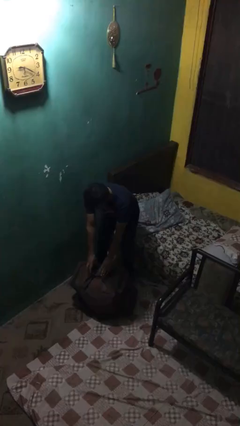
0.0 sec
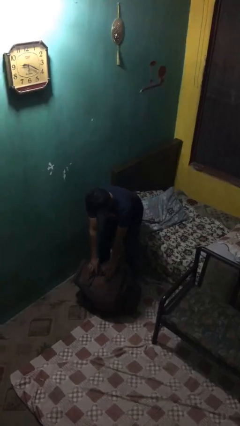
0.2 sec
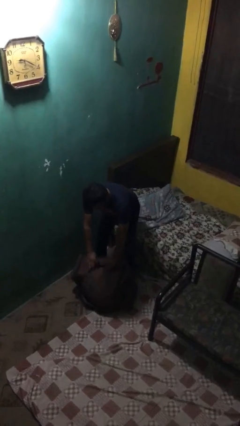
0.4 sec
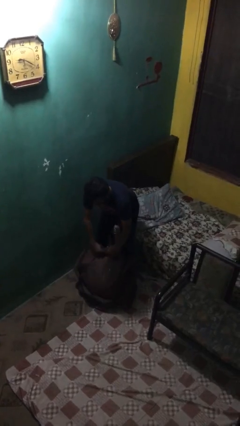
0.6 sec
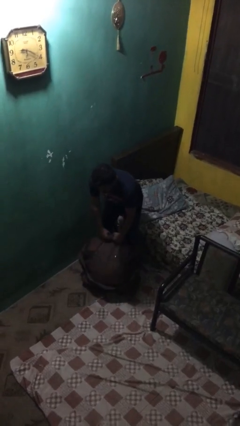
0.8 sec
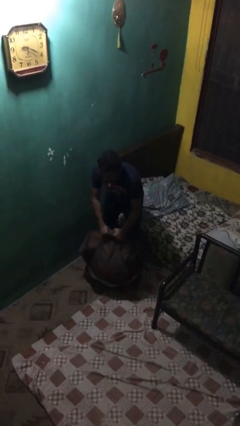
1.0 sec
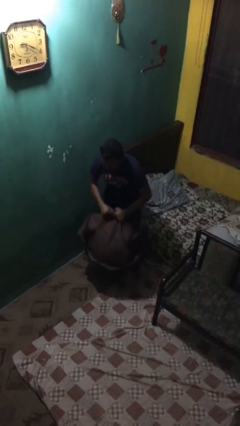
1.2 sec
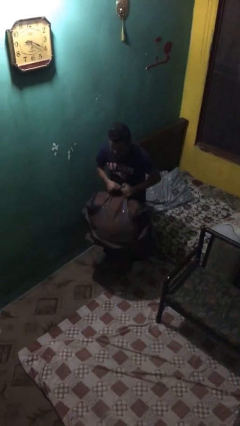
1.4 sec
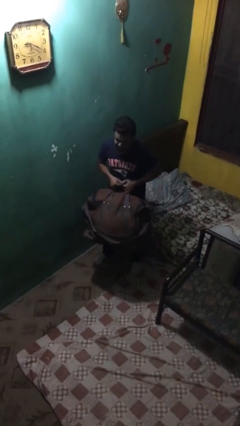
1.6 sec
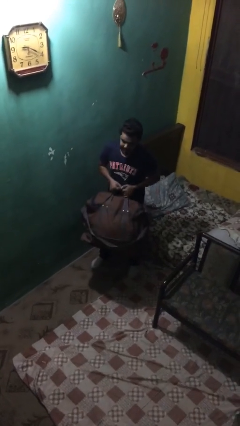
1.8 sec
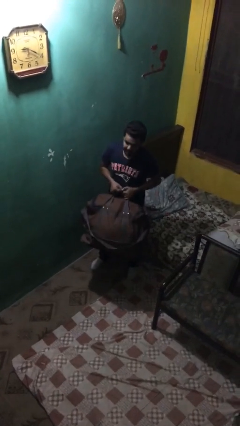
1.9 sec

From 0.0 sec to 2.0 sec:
person picks up object from floor

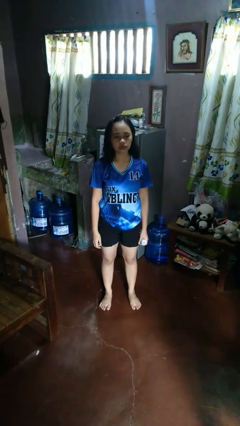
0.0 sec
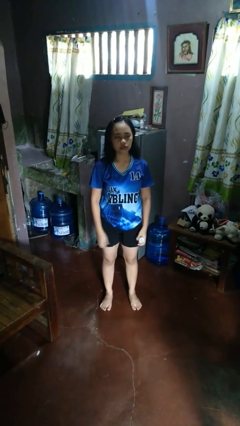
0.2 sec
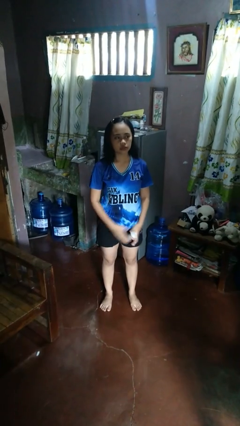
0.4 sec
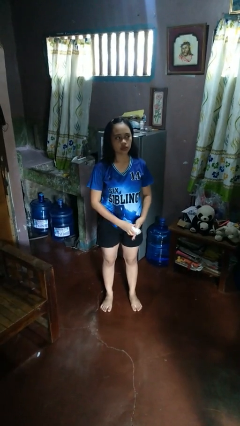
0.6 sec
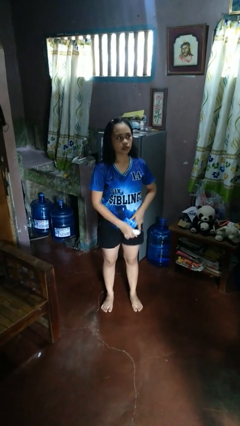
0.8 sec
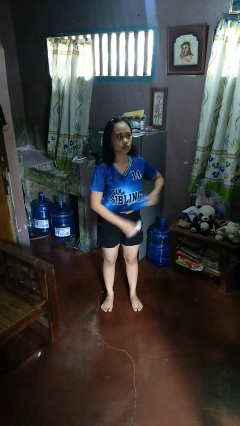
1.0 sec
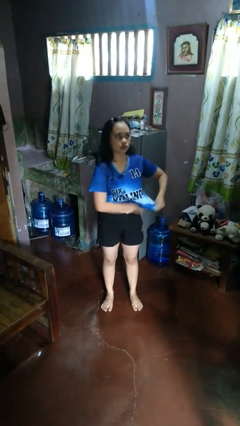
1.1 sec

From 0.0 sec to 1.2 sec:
person applies deodorant

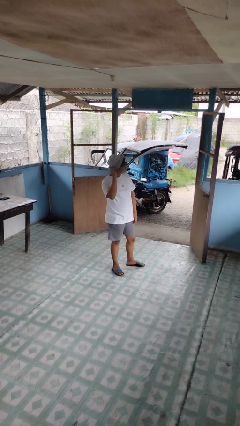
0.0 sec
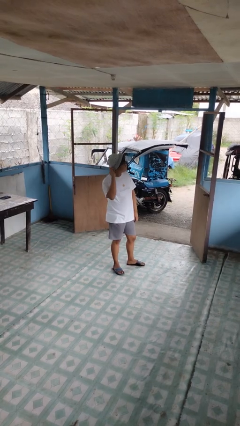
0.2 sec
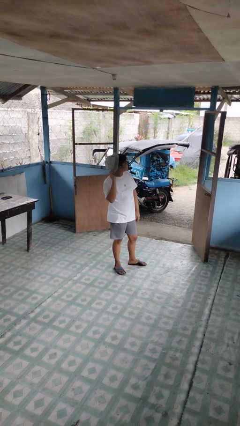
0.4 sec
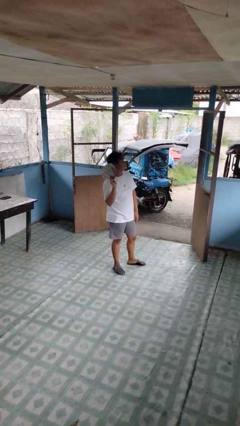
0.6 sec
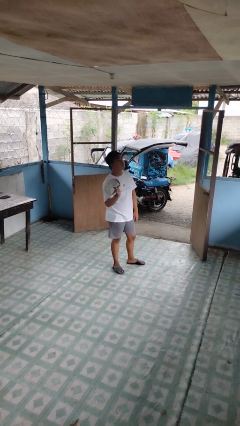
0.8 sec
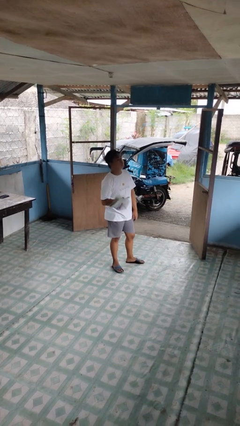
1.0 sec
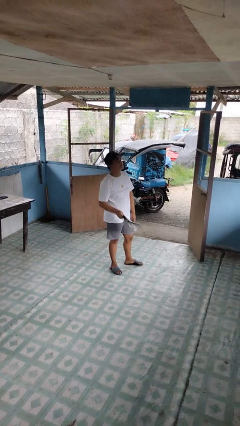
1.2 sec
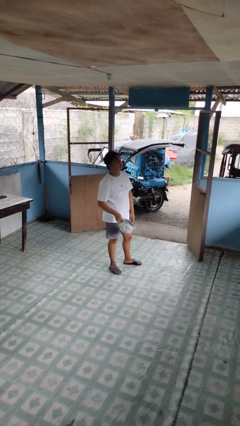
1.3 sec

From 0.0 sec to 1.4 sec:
person takes off hat

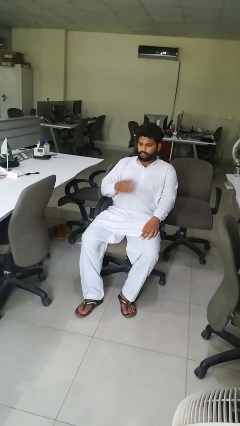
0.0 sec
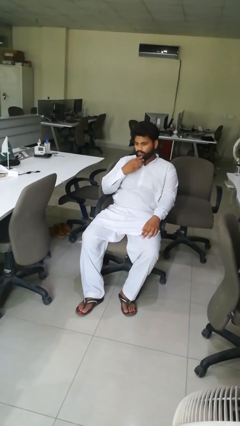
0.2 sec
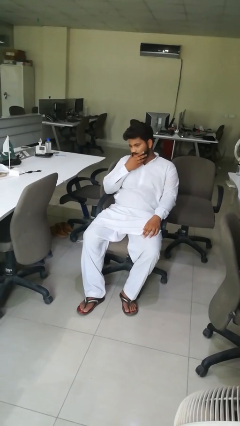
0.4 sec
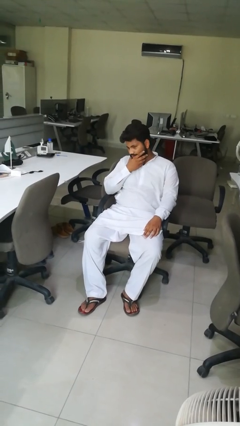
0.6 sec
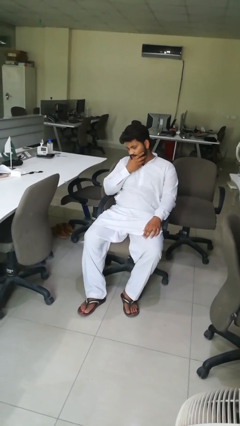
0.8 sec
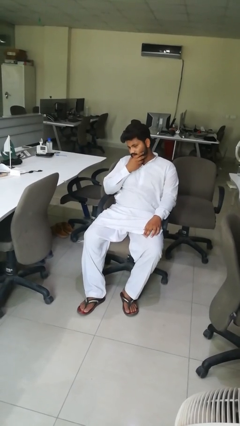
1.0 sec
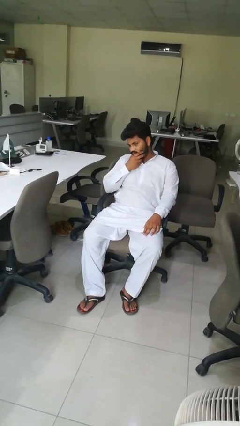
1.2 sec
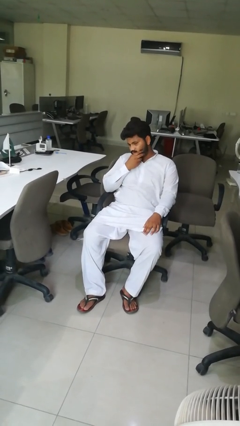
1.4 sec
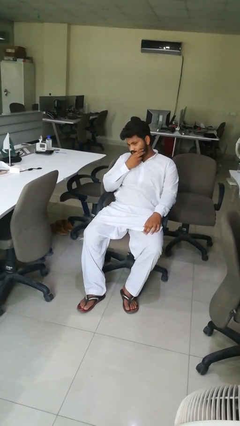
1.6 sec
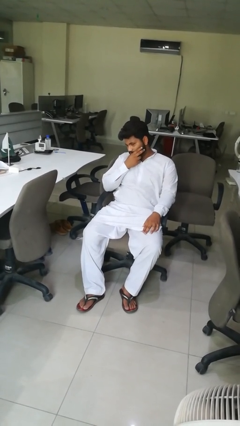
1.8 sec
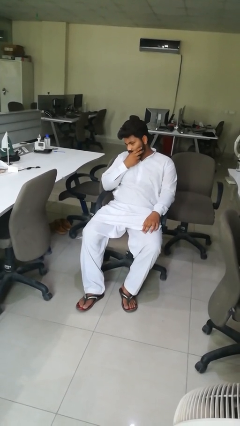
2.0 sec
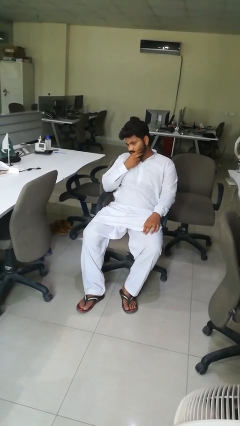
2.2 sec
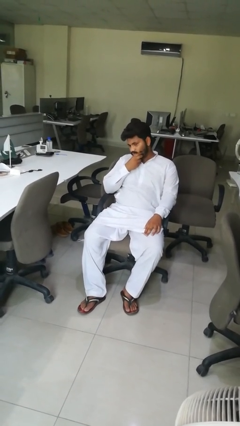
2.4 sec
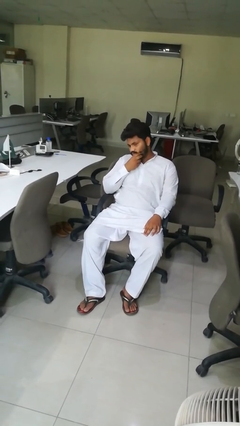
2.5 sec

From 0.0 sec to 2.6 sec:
person strokes chin

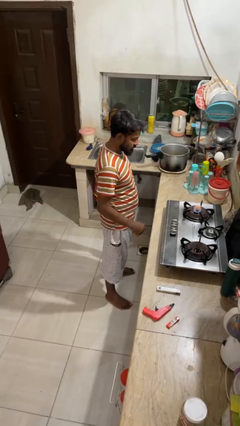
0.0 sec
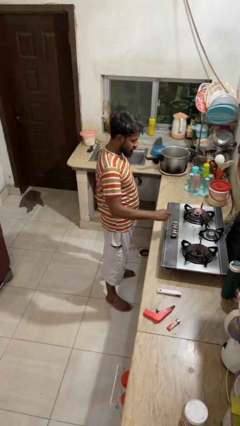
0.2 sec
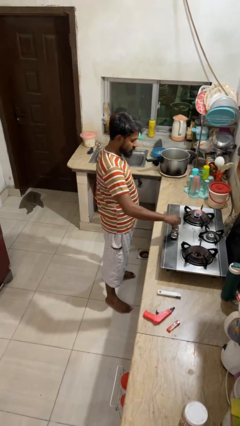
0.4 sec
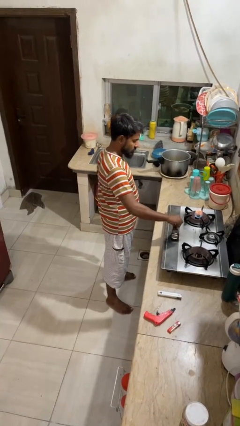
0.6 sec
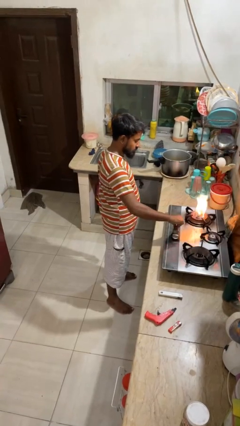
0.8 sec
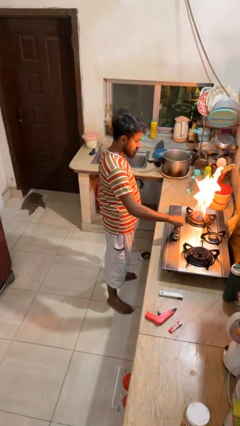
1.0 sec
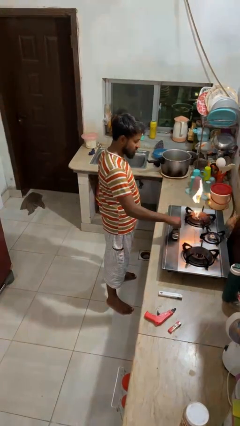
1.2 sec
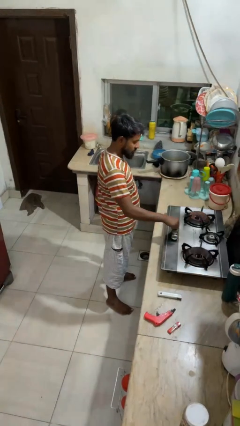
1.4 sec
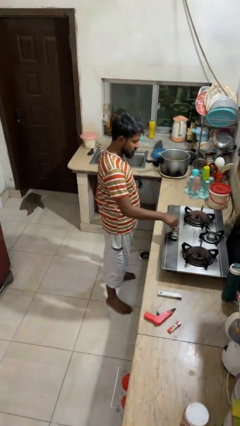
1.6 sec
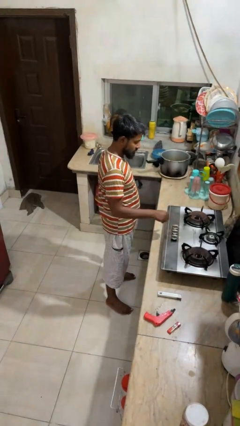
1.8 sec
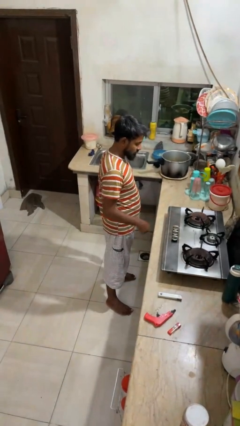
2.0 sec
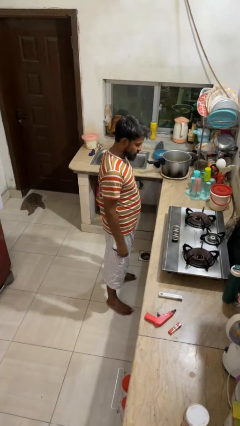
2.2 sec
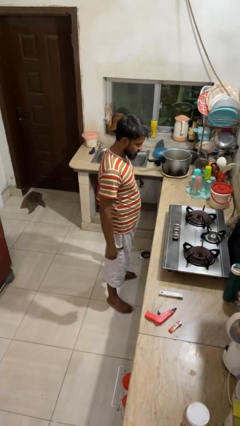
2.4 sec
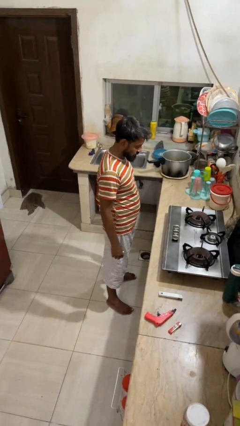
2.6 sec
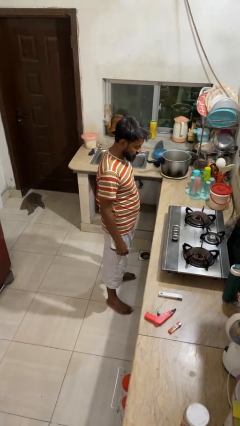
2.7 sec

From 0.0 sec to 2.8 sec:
person turns off stovetop

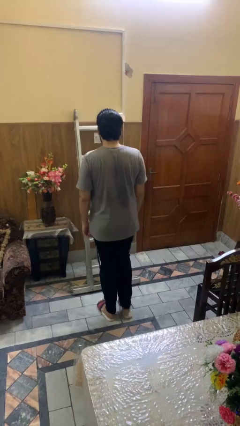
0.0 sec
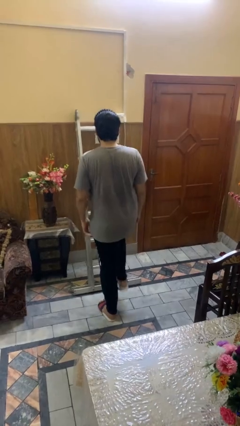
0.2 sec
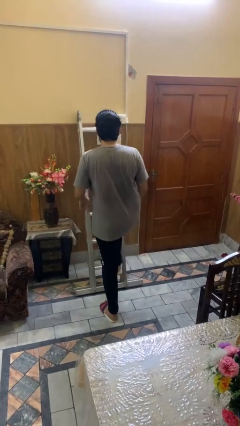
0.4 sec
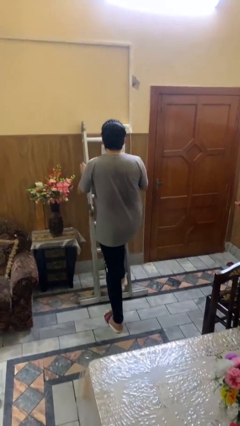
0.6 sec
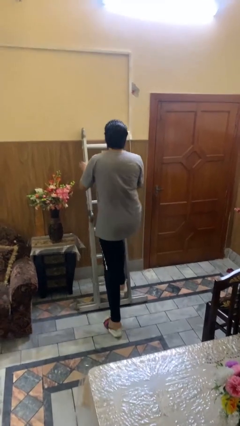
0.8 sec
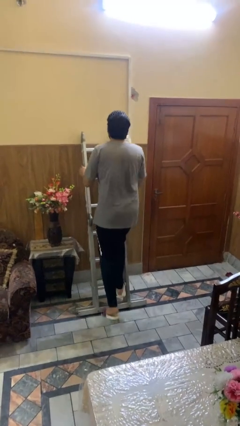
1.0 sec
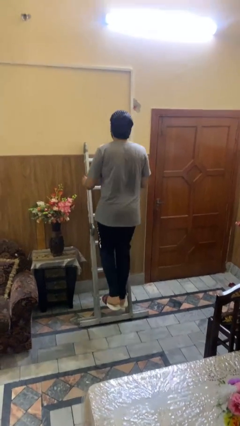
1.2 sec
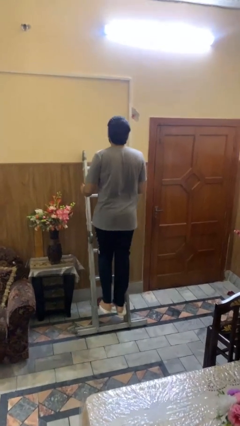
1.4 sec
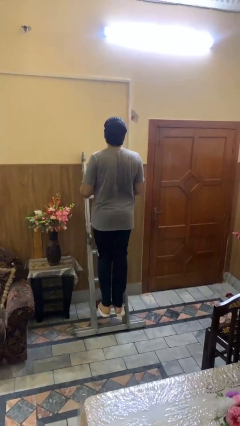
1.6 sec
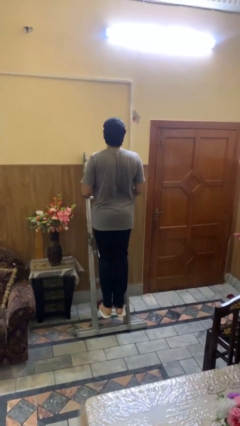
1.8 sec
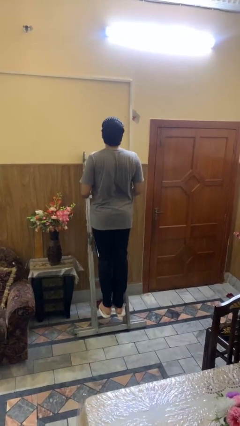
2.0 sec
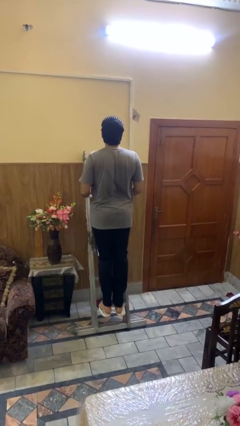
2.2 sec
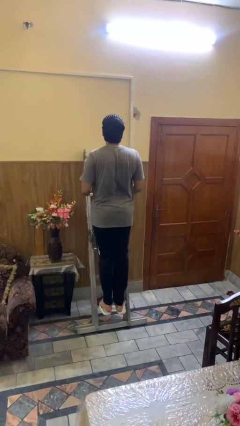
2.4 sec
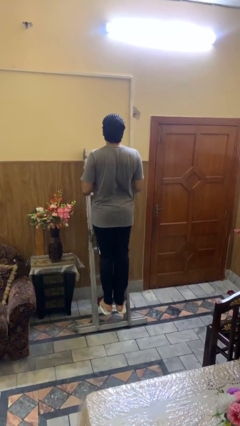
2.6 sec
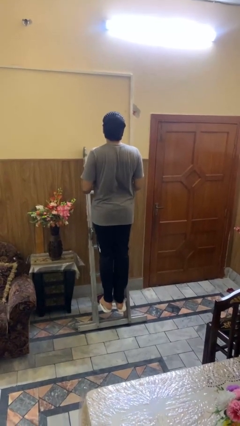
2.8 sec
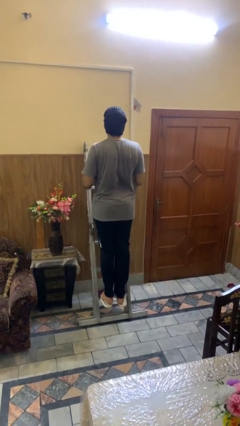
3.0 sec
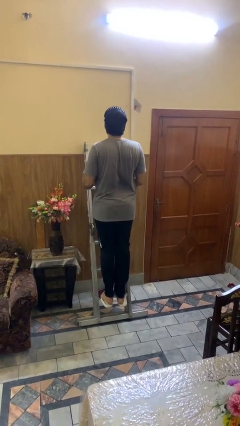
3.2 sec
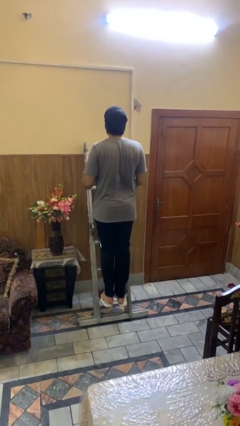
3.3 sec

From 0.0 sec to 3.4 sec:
person climbs up ladder

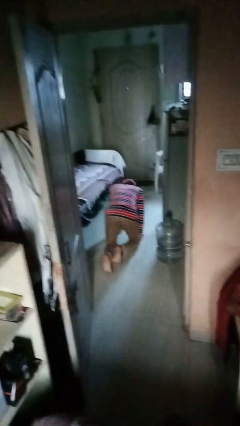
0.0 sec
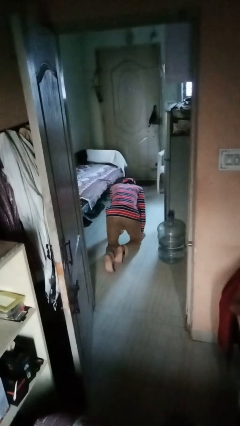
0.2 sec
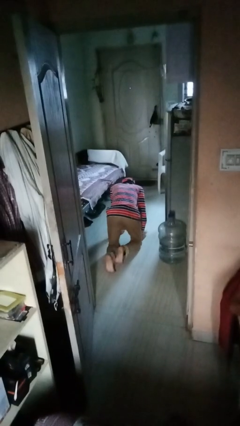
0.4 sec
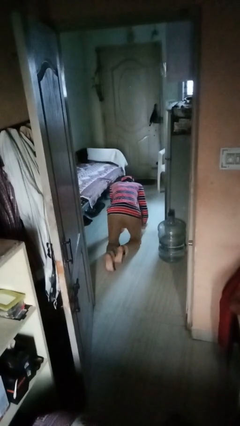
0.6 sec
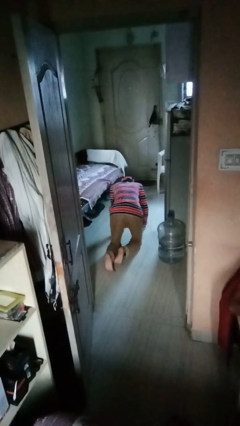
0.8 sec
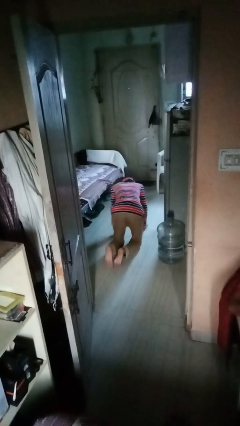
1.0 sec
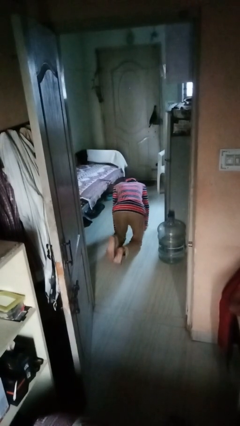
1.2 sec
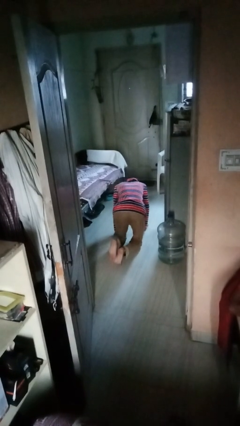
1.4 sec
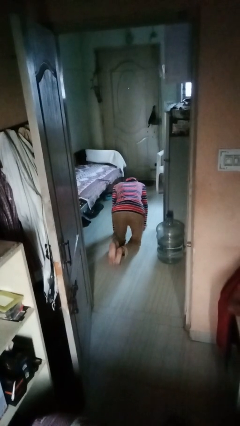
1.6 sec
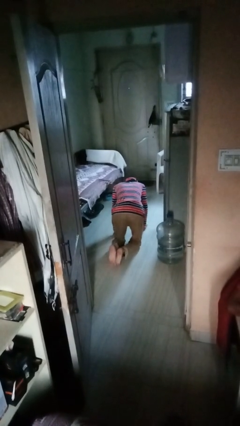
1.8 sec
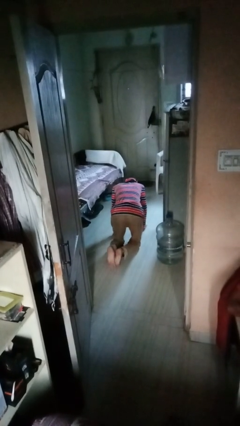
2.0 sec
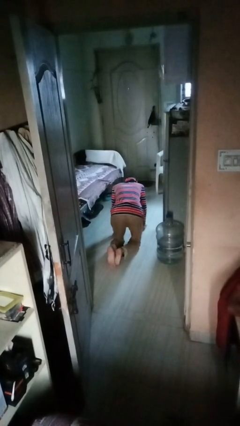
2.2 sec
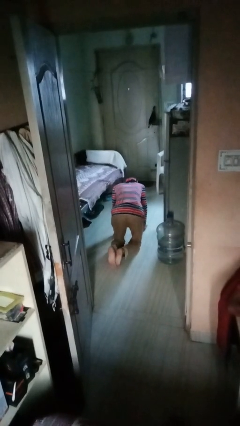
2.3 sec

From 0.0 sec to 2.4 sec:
person crawls

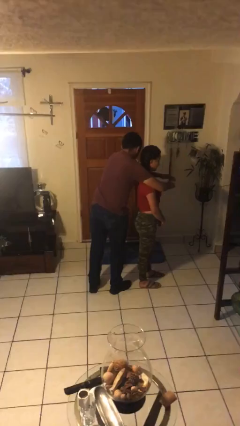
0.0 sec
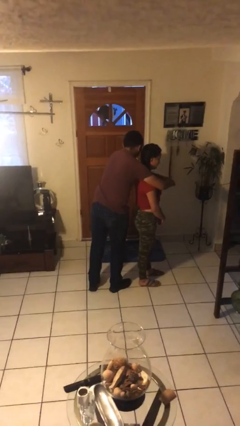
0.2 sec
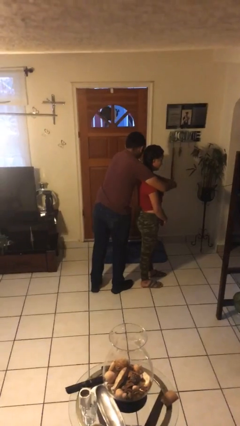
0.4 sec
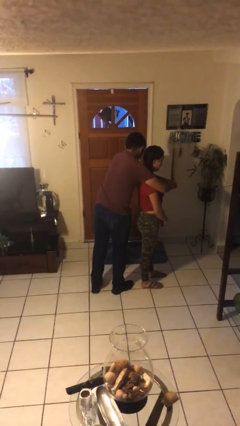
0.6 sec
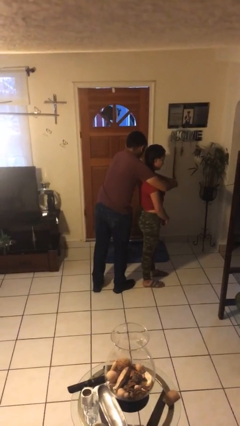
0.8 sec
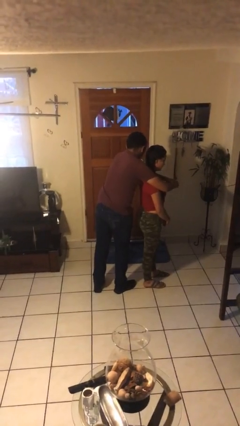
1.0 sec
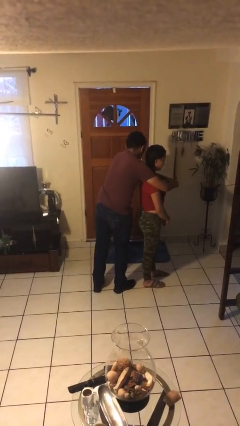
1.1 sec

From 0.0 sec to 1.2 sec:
person hugs person from behind
